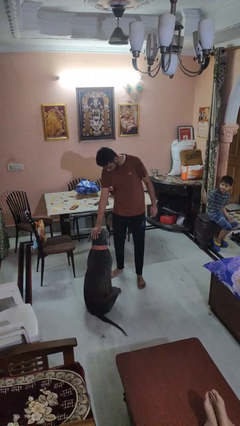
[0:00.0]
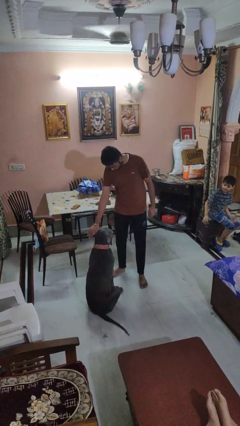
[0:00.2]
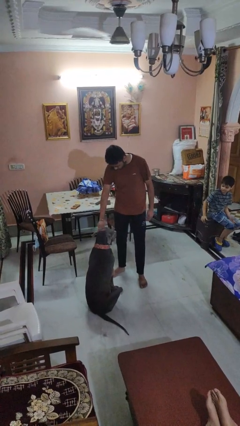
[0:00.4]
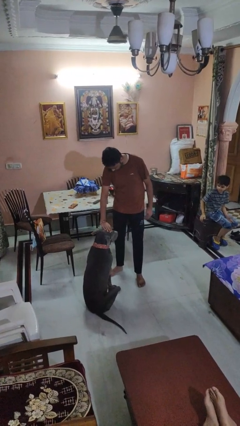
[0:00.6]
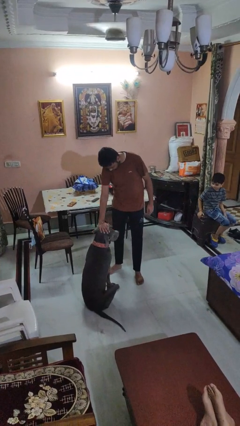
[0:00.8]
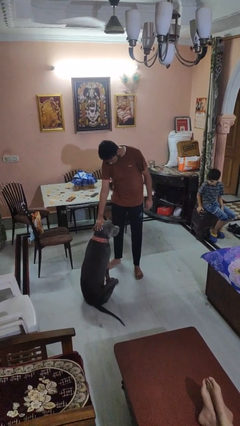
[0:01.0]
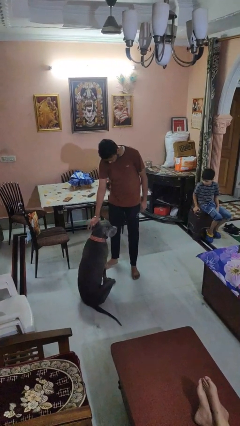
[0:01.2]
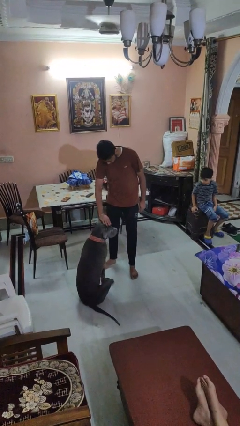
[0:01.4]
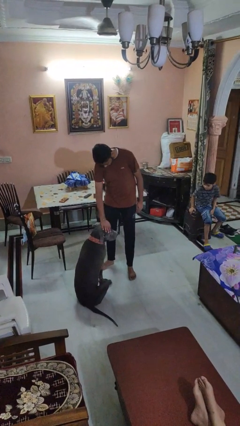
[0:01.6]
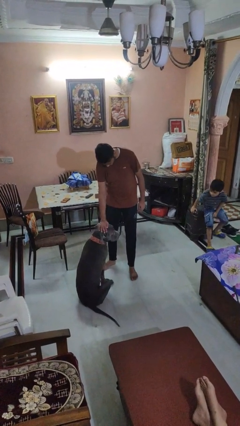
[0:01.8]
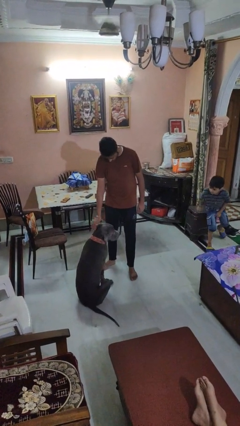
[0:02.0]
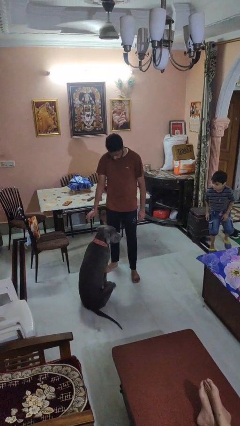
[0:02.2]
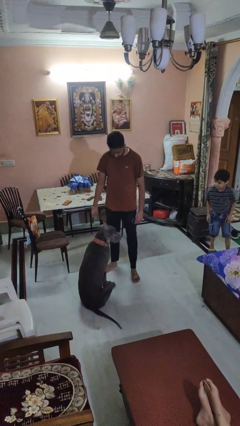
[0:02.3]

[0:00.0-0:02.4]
person pets dog

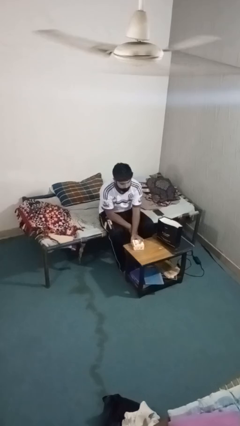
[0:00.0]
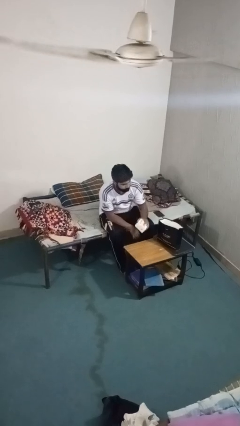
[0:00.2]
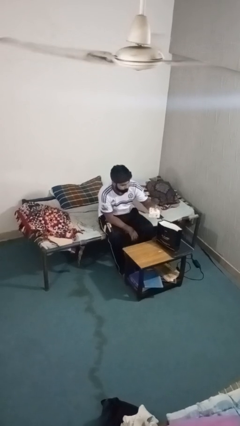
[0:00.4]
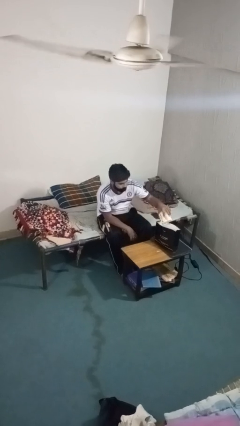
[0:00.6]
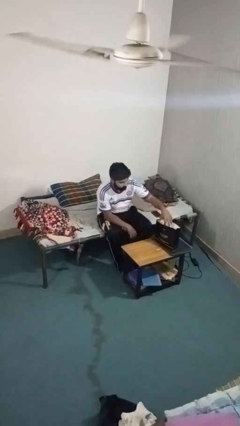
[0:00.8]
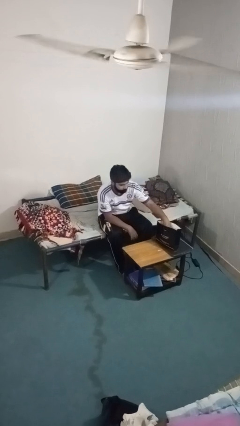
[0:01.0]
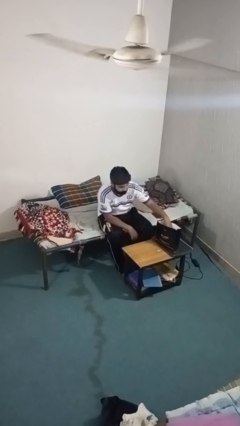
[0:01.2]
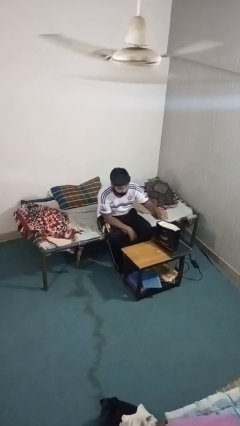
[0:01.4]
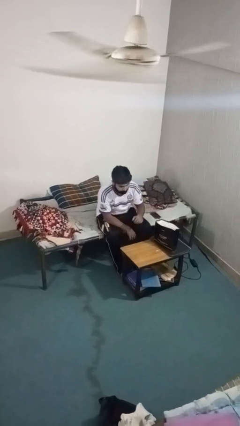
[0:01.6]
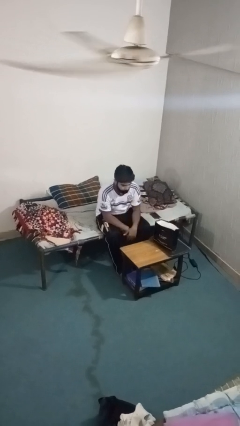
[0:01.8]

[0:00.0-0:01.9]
person puts object into bag

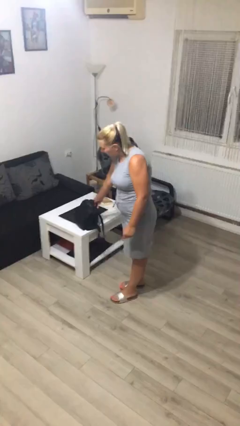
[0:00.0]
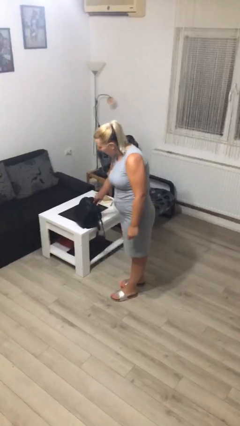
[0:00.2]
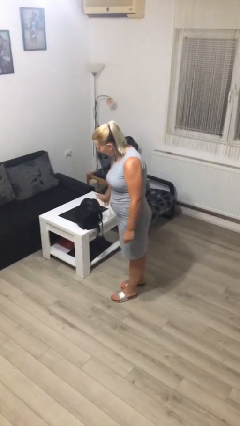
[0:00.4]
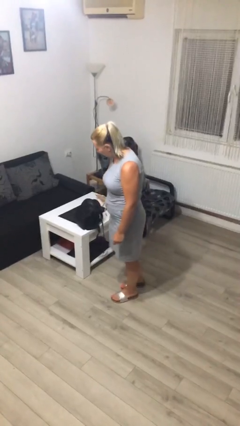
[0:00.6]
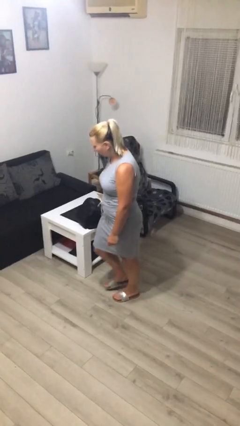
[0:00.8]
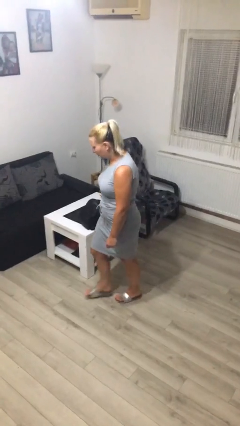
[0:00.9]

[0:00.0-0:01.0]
person puts down object on table

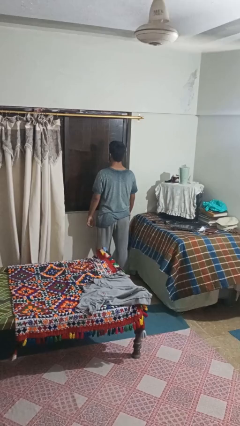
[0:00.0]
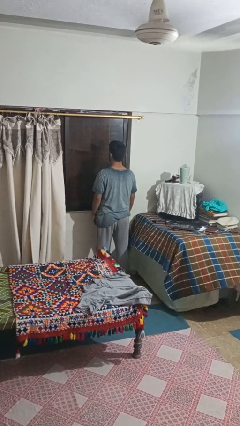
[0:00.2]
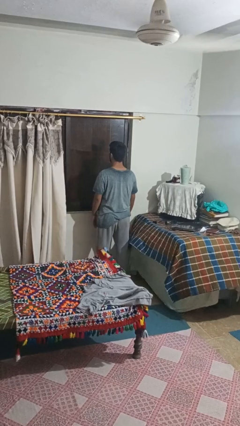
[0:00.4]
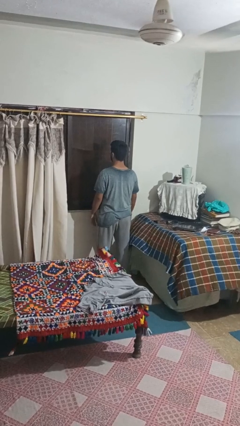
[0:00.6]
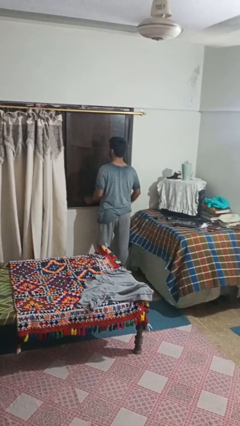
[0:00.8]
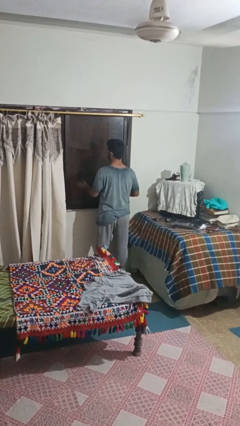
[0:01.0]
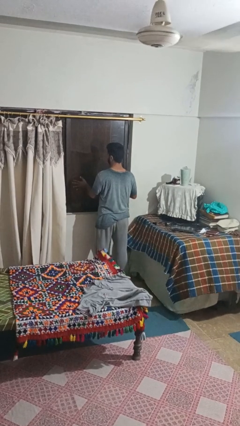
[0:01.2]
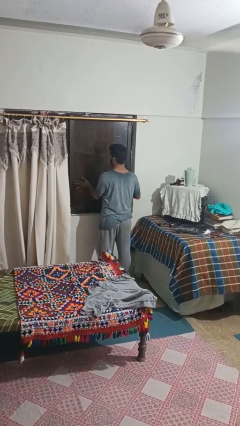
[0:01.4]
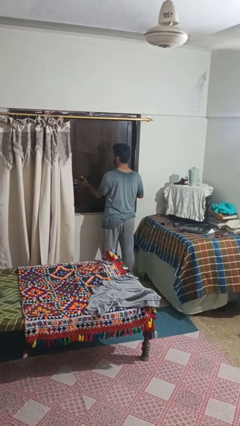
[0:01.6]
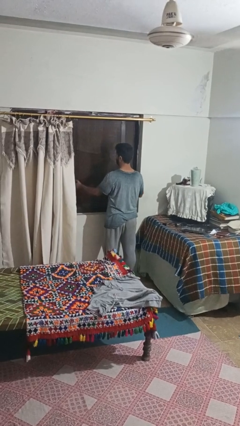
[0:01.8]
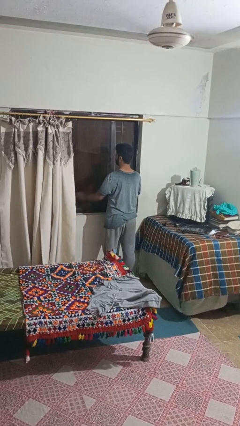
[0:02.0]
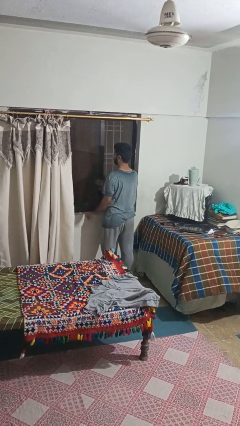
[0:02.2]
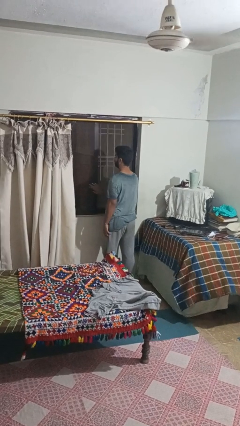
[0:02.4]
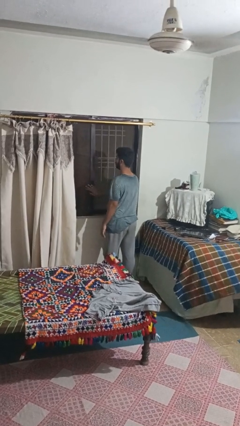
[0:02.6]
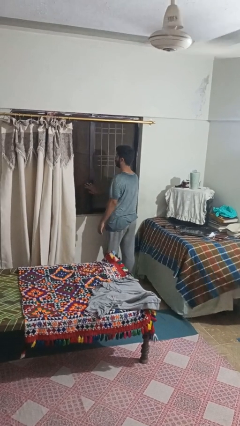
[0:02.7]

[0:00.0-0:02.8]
person opens home window

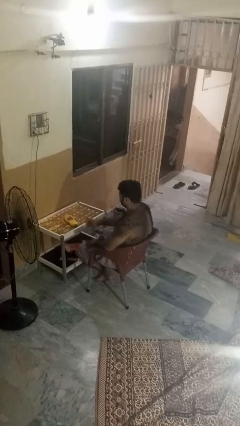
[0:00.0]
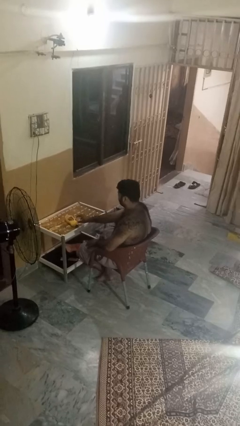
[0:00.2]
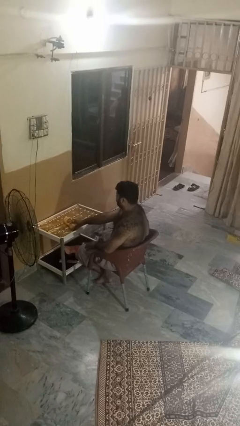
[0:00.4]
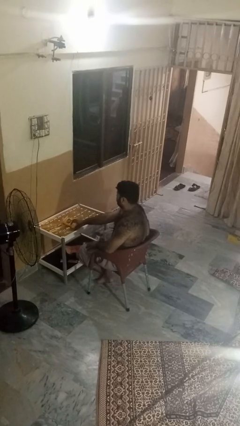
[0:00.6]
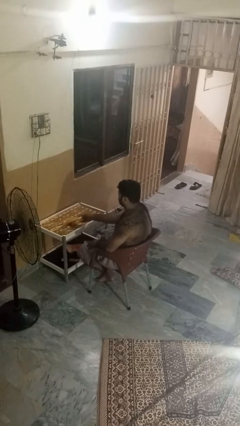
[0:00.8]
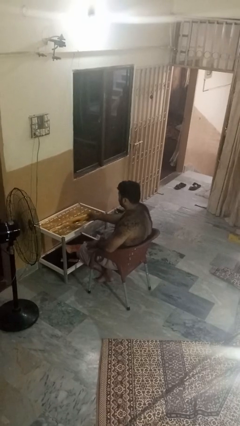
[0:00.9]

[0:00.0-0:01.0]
person picks up object from table

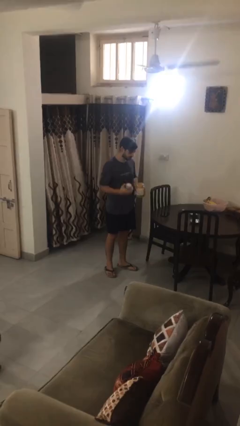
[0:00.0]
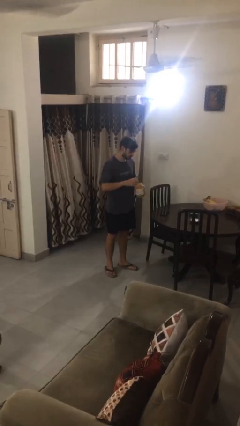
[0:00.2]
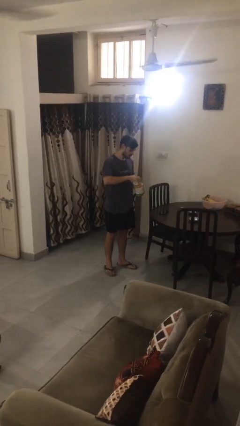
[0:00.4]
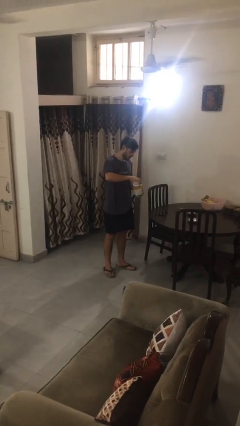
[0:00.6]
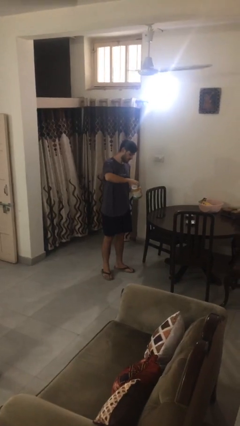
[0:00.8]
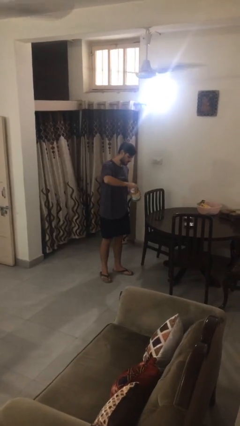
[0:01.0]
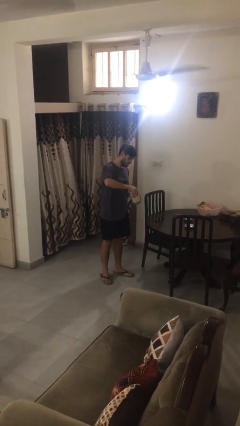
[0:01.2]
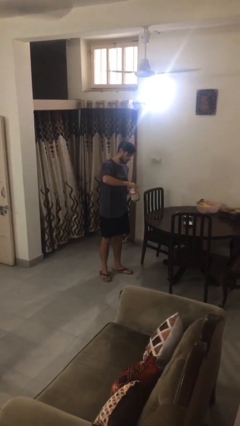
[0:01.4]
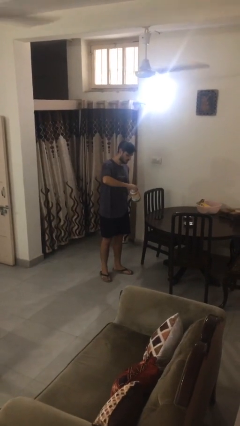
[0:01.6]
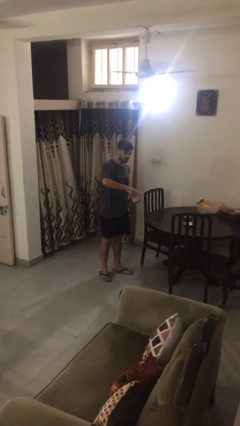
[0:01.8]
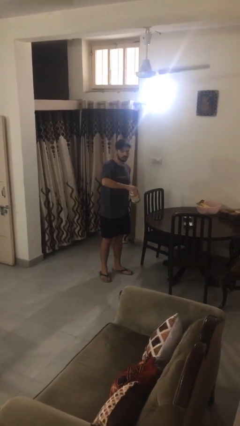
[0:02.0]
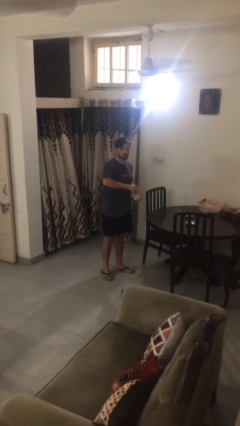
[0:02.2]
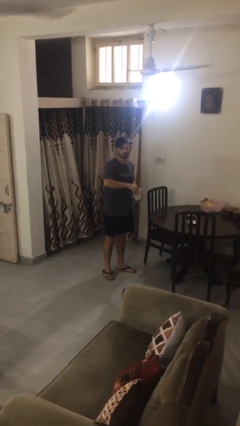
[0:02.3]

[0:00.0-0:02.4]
person closes jar

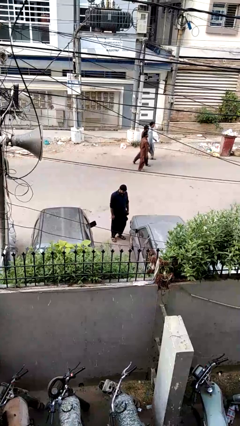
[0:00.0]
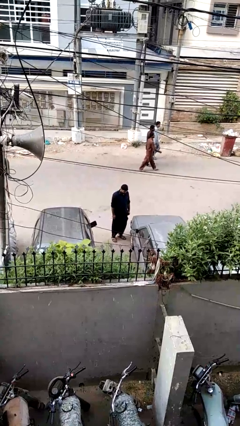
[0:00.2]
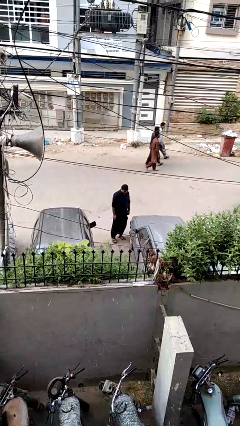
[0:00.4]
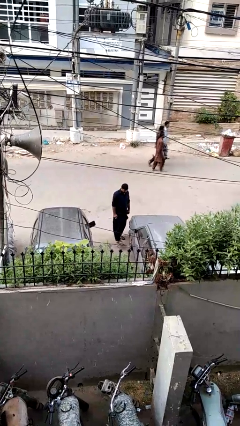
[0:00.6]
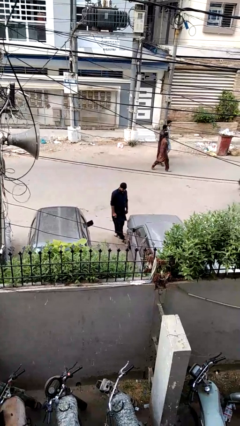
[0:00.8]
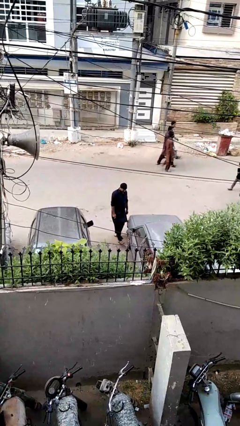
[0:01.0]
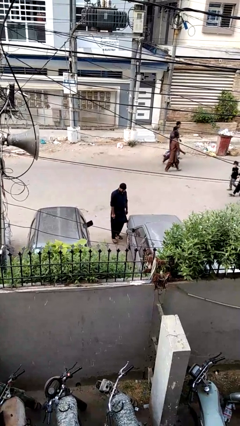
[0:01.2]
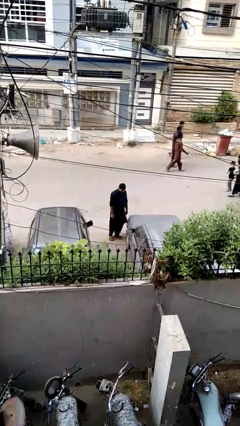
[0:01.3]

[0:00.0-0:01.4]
person kicks car tires

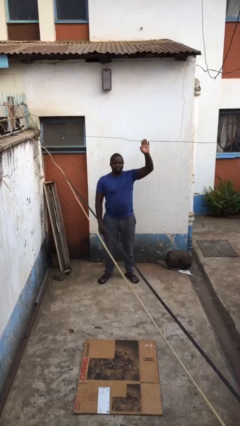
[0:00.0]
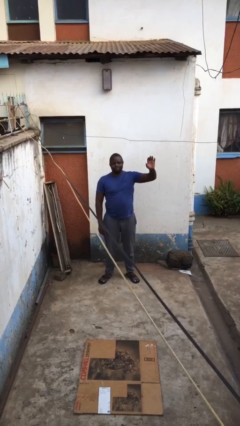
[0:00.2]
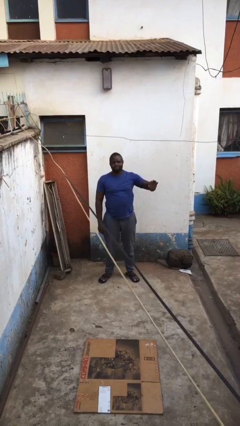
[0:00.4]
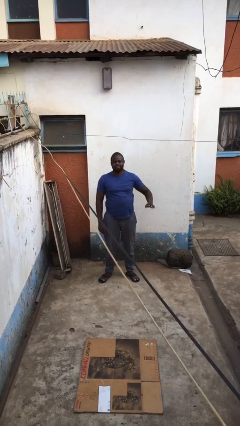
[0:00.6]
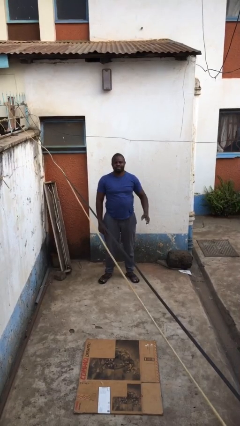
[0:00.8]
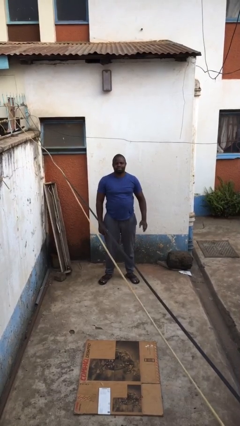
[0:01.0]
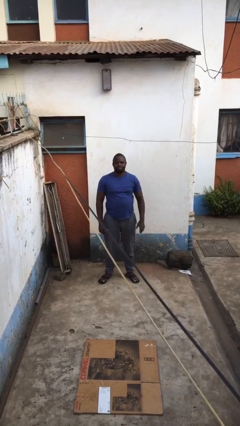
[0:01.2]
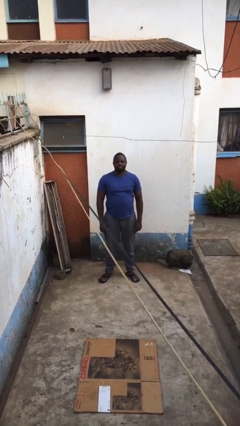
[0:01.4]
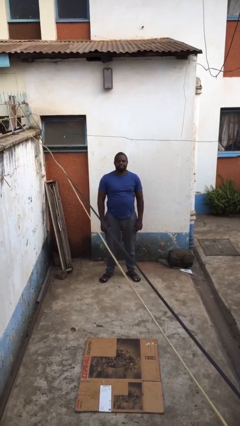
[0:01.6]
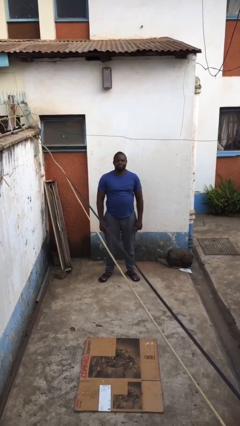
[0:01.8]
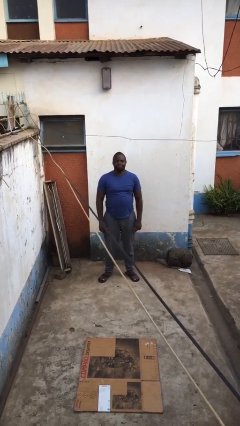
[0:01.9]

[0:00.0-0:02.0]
person gestures lower hand

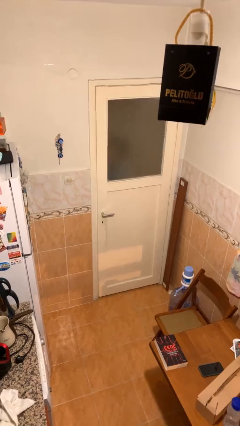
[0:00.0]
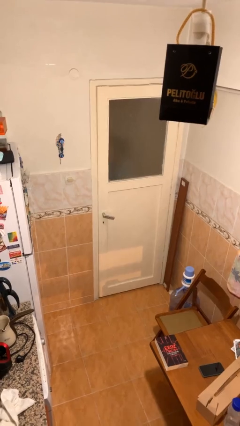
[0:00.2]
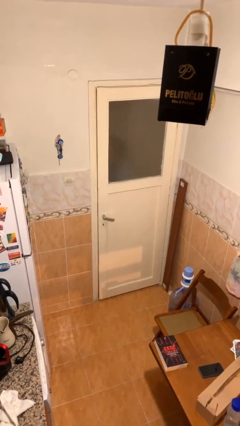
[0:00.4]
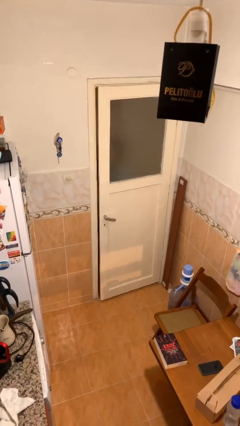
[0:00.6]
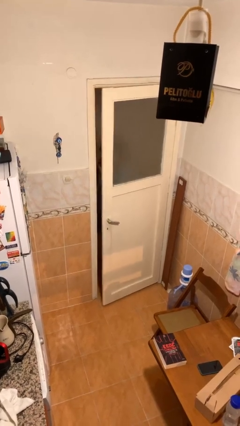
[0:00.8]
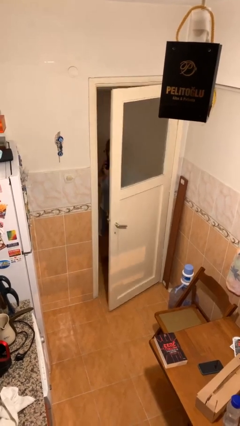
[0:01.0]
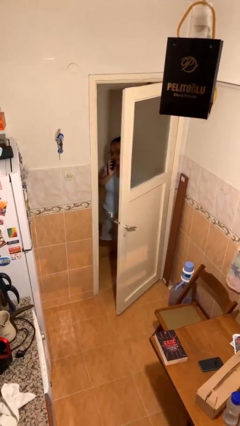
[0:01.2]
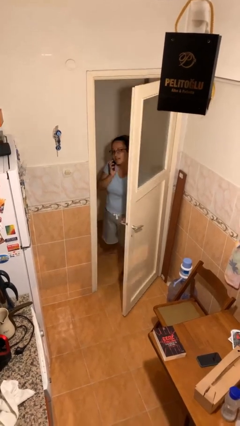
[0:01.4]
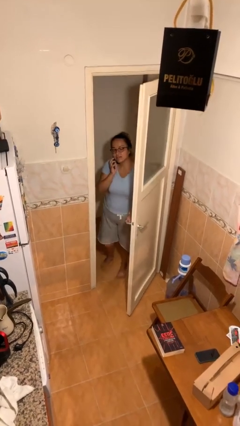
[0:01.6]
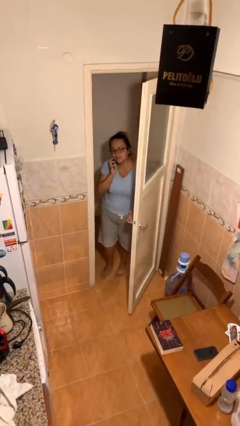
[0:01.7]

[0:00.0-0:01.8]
person opens facility door
